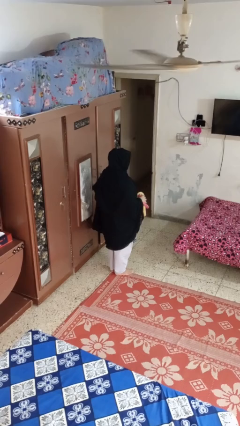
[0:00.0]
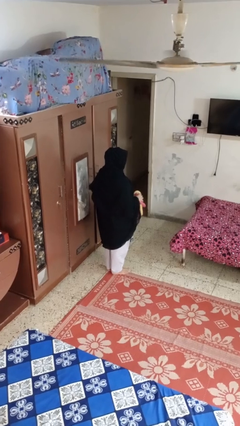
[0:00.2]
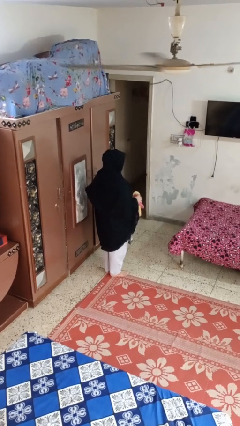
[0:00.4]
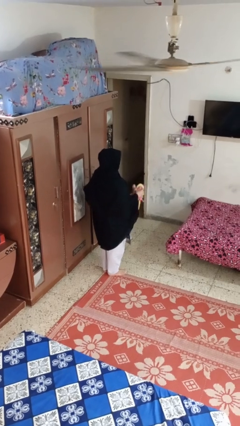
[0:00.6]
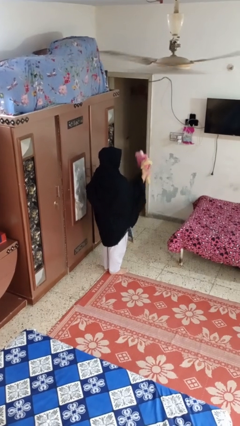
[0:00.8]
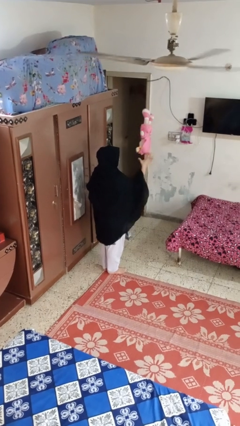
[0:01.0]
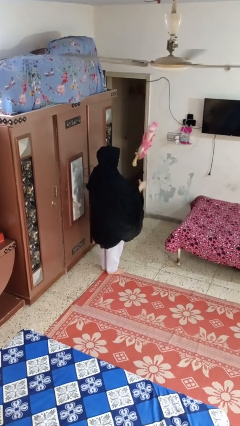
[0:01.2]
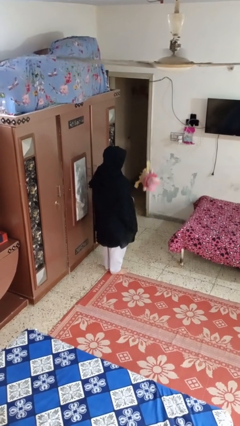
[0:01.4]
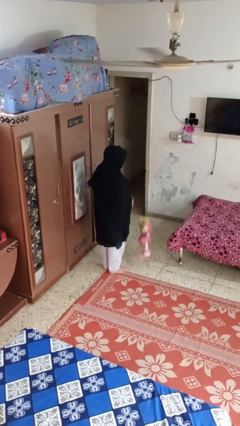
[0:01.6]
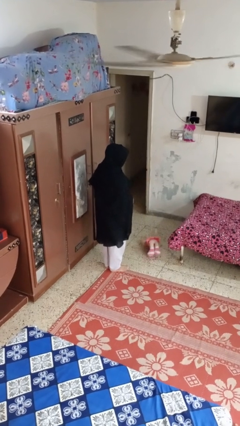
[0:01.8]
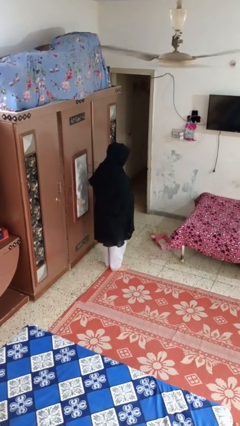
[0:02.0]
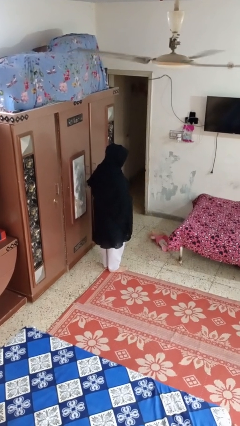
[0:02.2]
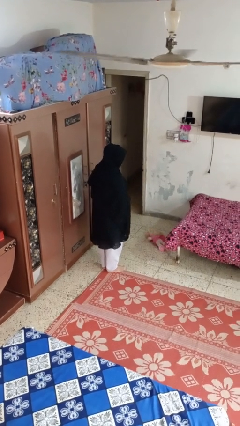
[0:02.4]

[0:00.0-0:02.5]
person throws object into air

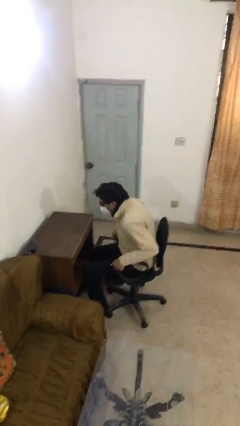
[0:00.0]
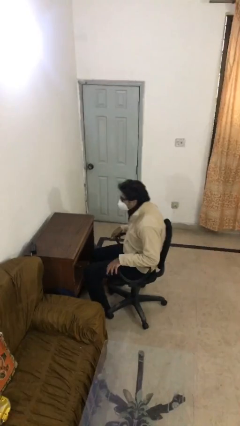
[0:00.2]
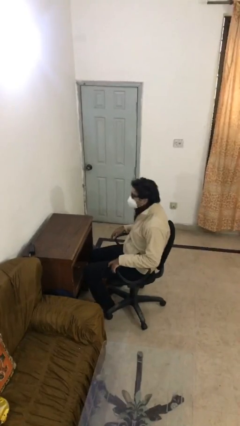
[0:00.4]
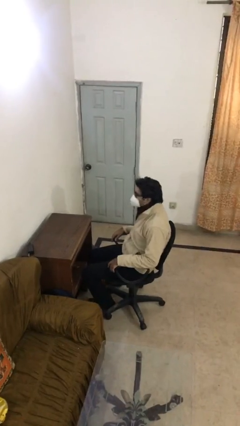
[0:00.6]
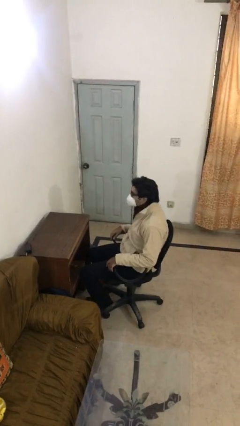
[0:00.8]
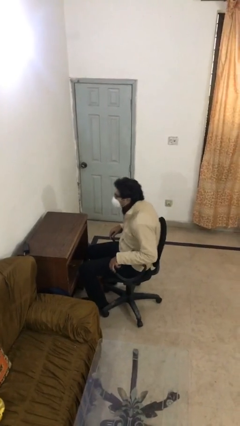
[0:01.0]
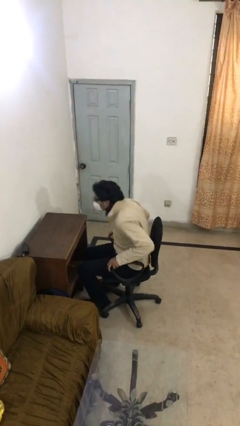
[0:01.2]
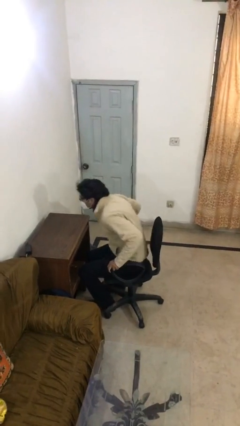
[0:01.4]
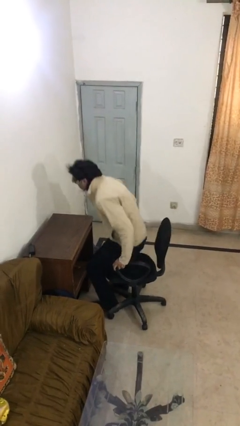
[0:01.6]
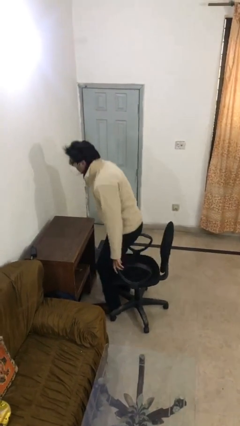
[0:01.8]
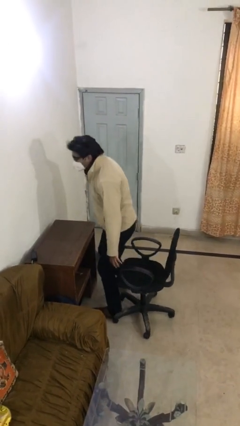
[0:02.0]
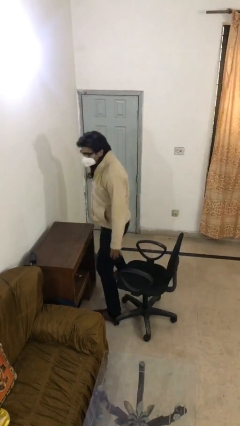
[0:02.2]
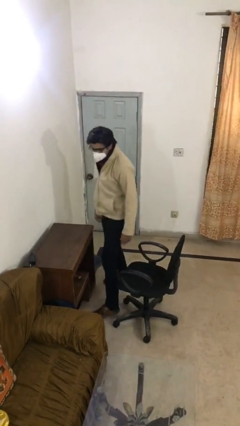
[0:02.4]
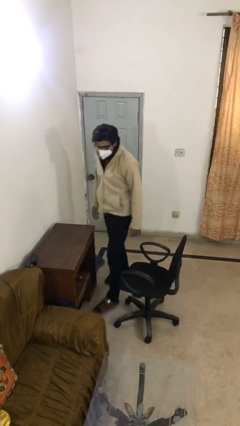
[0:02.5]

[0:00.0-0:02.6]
person stands up

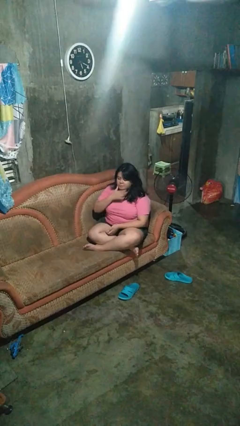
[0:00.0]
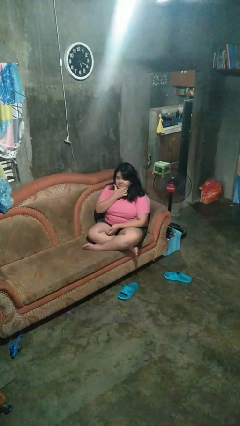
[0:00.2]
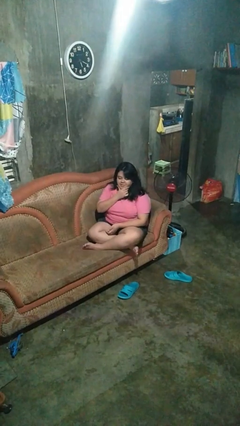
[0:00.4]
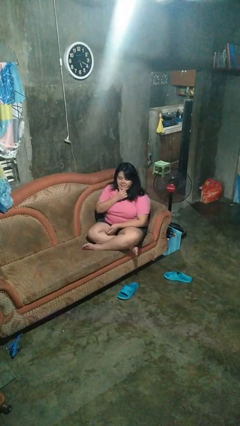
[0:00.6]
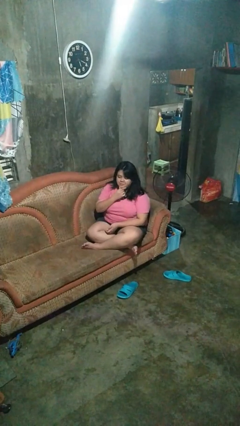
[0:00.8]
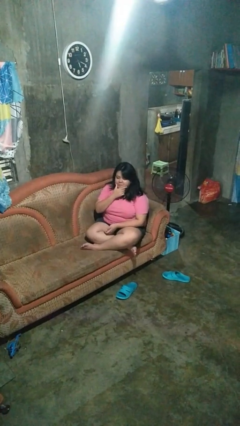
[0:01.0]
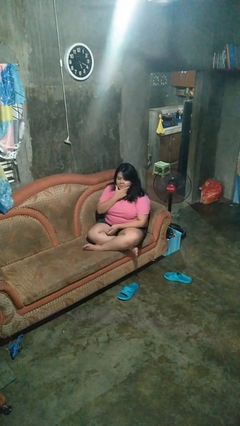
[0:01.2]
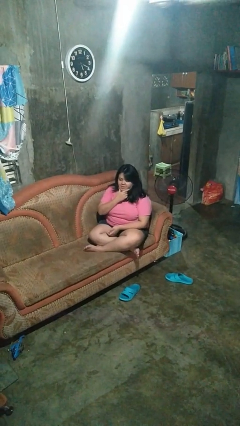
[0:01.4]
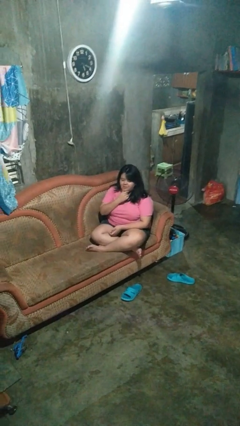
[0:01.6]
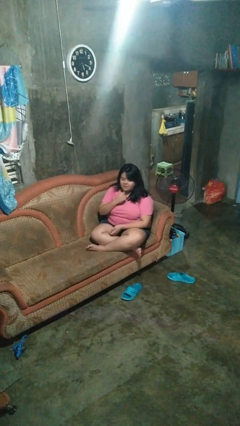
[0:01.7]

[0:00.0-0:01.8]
person strokes chin

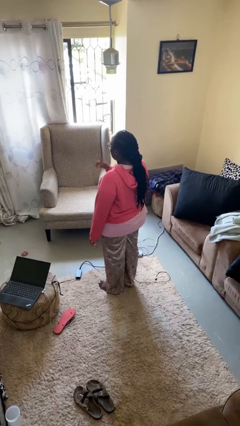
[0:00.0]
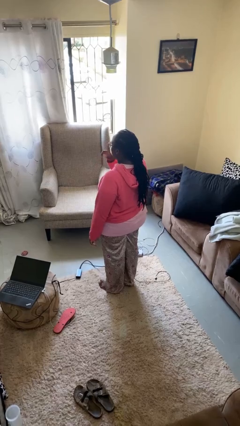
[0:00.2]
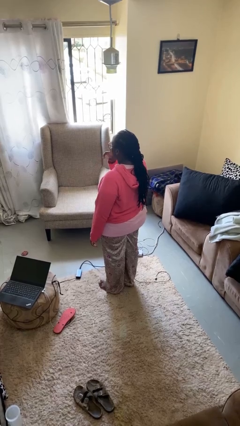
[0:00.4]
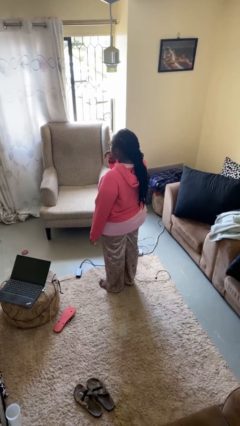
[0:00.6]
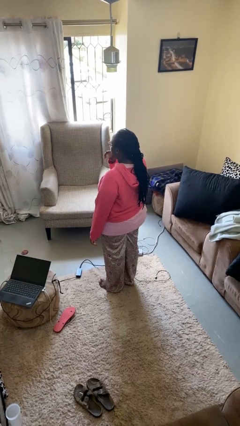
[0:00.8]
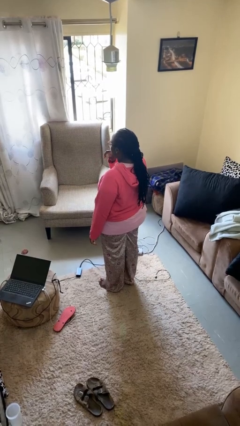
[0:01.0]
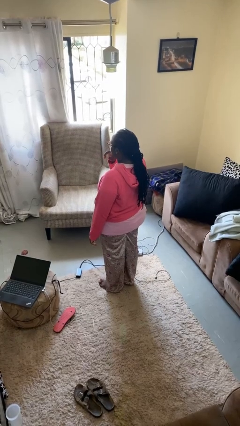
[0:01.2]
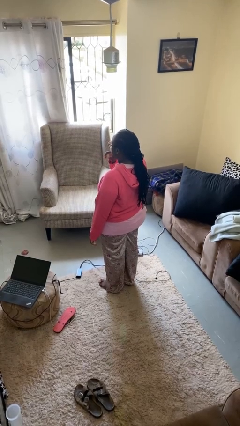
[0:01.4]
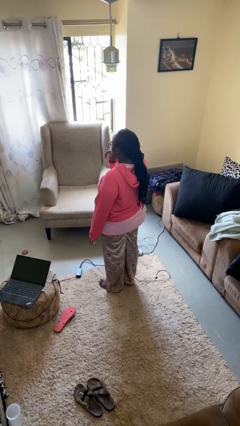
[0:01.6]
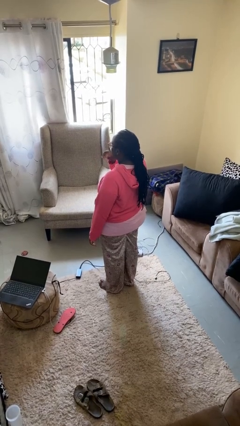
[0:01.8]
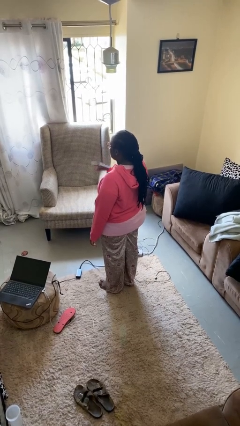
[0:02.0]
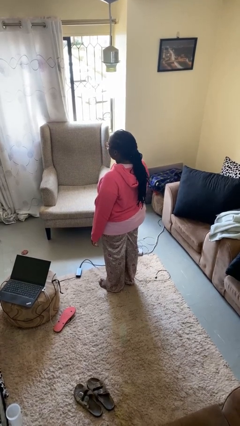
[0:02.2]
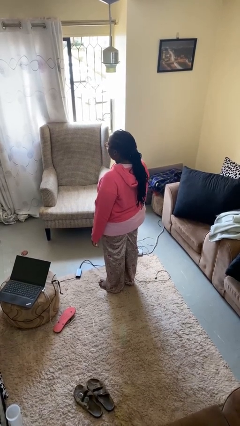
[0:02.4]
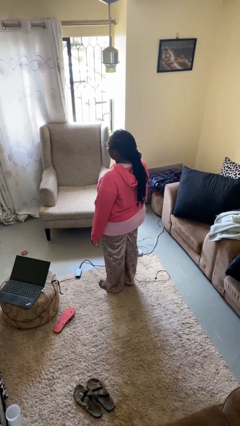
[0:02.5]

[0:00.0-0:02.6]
person gestures be quiet

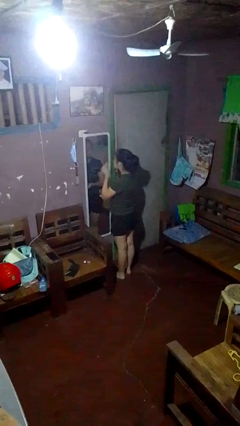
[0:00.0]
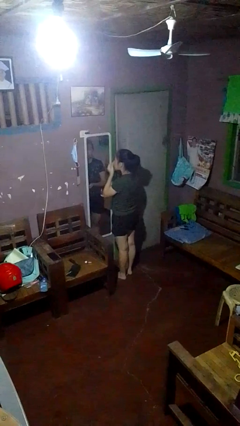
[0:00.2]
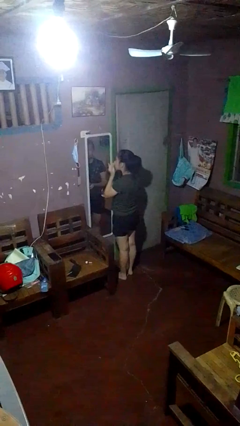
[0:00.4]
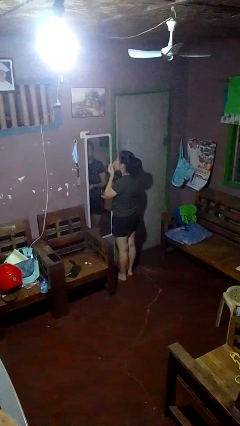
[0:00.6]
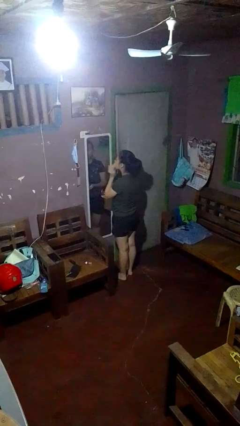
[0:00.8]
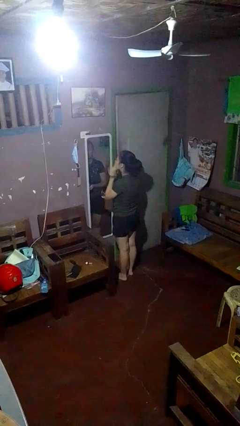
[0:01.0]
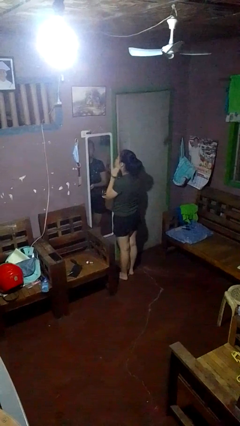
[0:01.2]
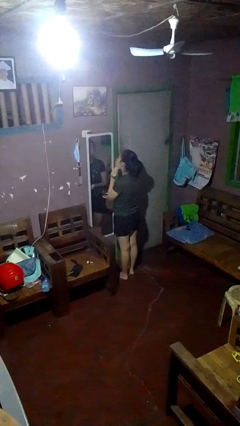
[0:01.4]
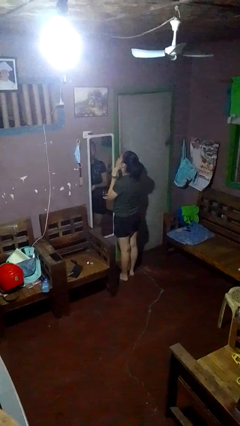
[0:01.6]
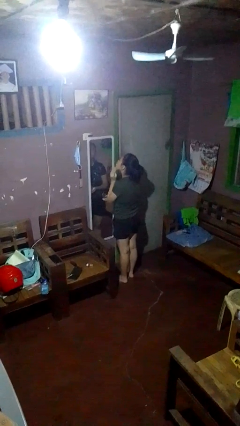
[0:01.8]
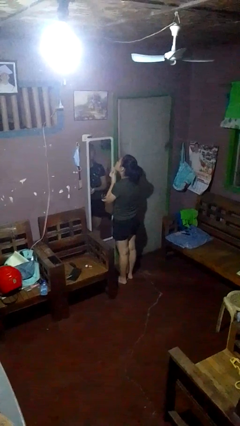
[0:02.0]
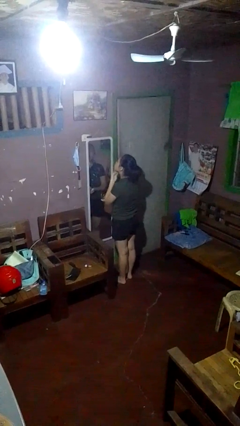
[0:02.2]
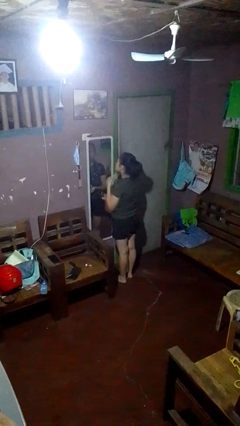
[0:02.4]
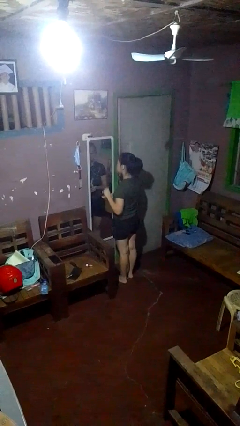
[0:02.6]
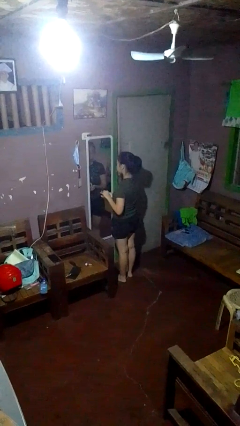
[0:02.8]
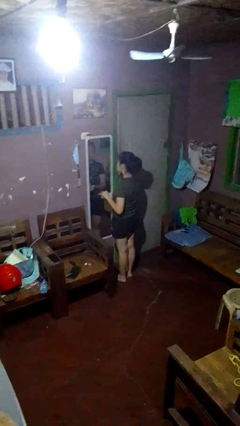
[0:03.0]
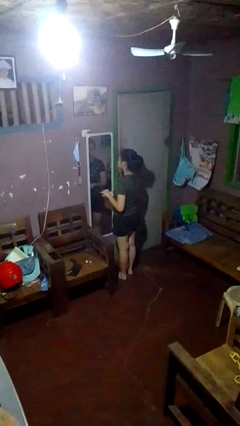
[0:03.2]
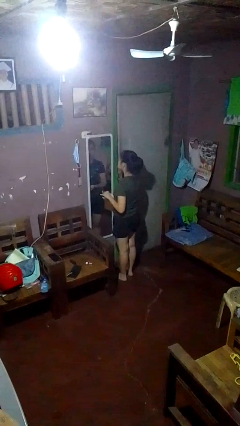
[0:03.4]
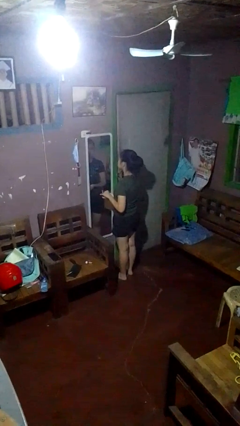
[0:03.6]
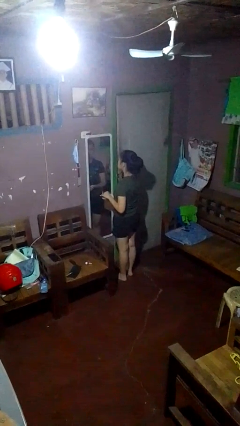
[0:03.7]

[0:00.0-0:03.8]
person applies foundation makeup

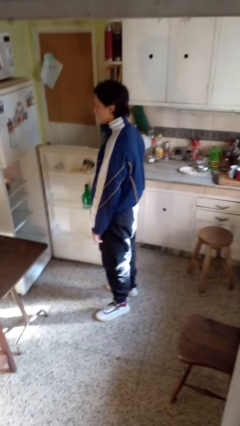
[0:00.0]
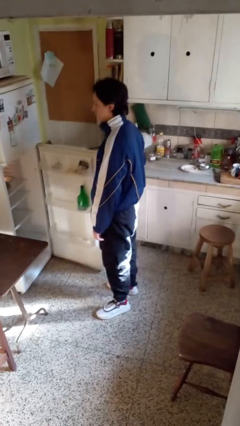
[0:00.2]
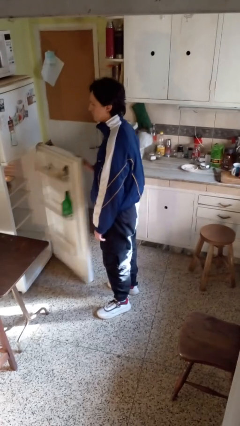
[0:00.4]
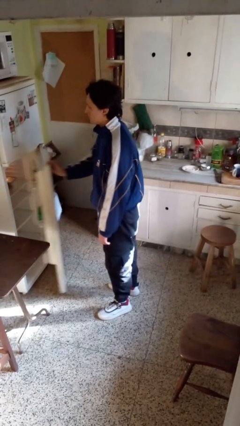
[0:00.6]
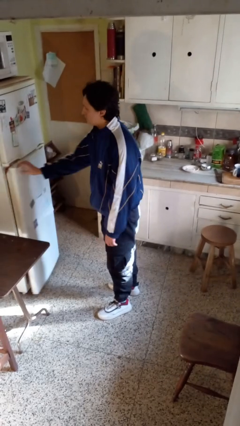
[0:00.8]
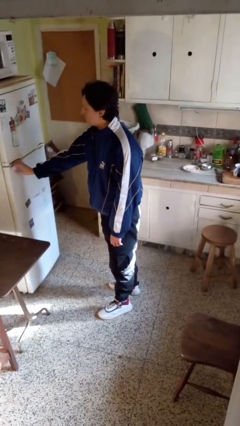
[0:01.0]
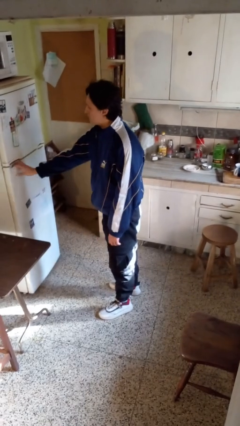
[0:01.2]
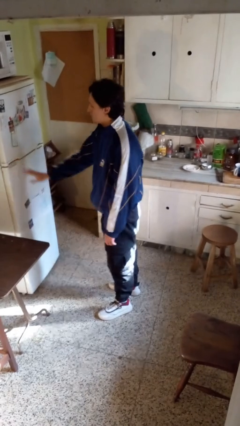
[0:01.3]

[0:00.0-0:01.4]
person closes refrigerator

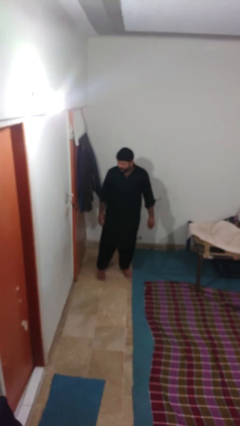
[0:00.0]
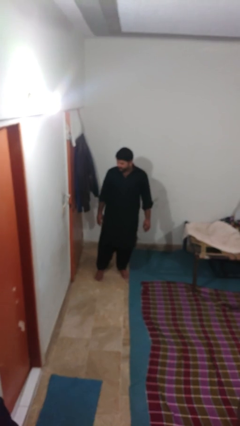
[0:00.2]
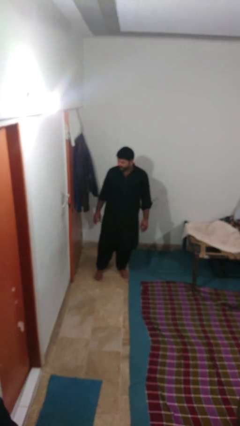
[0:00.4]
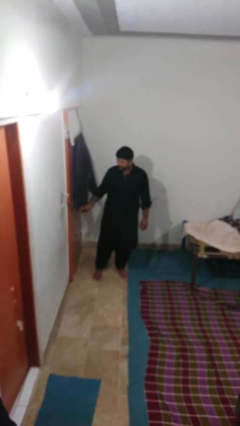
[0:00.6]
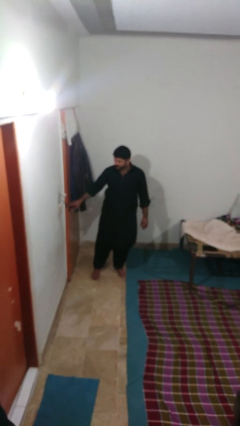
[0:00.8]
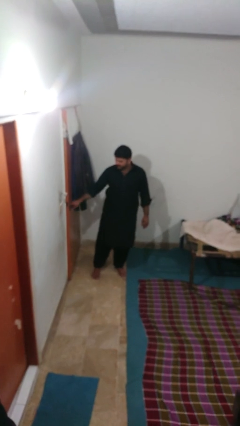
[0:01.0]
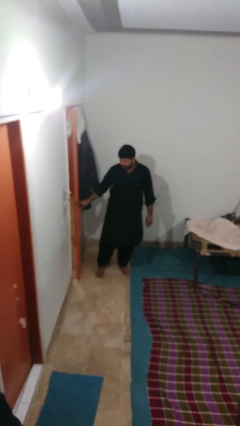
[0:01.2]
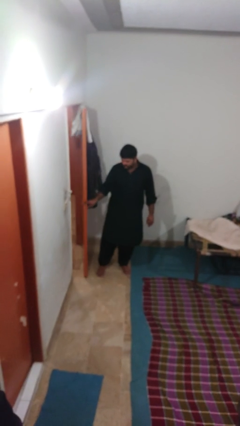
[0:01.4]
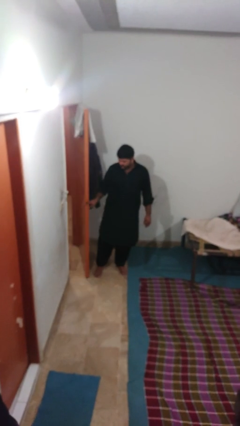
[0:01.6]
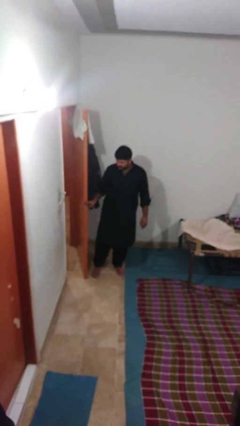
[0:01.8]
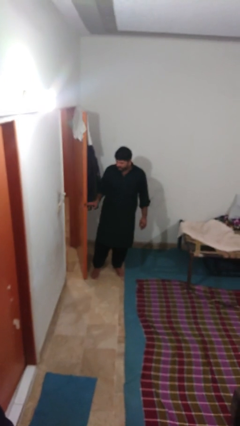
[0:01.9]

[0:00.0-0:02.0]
person opens facility door

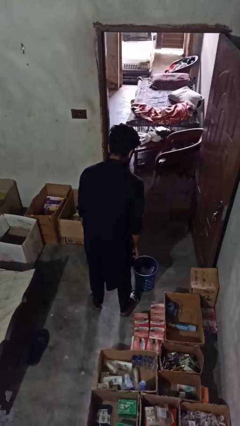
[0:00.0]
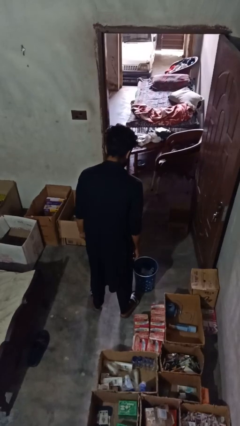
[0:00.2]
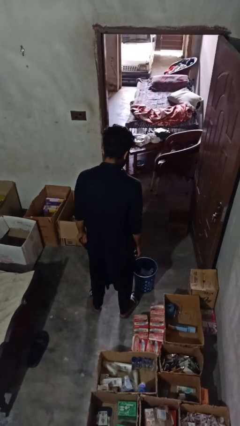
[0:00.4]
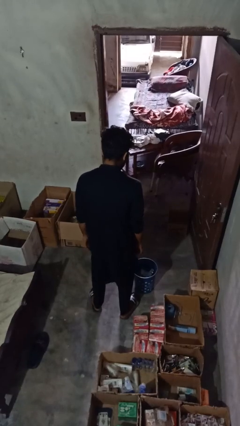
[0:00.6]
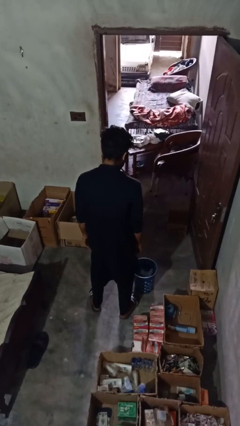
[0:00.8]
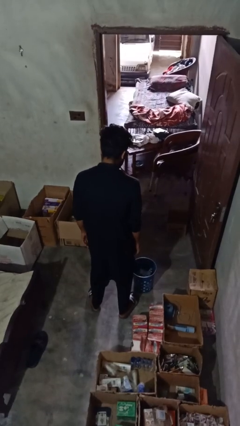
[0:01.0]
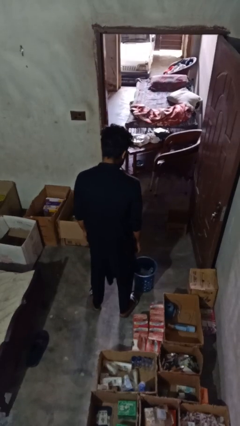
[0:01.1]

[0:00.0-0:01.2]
person removes trashbag from trashcan
